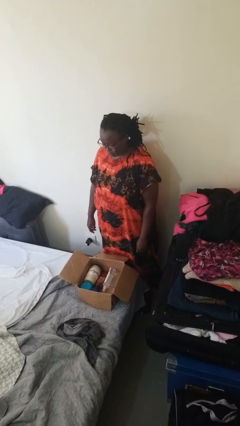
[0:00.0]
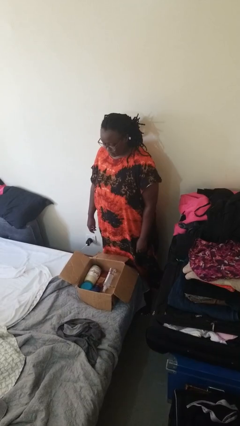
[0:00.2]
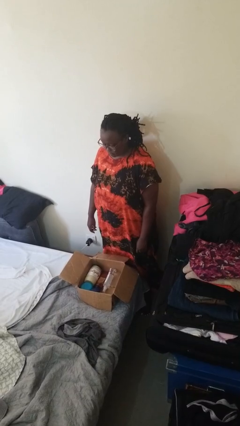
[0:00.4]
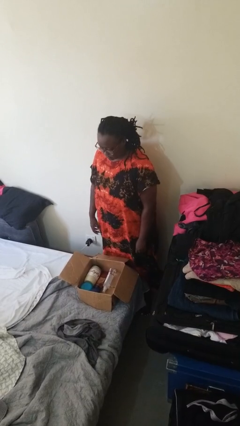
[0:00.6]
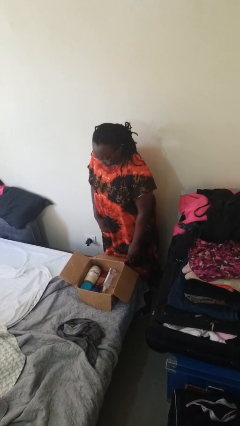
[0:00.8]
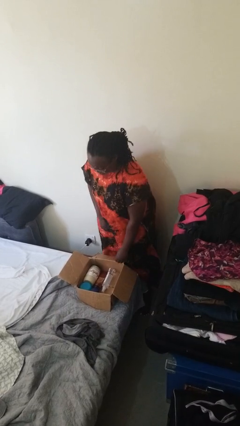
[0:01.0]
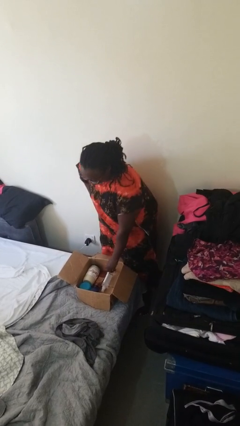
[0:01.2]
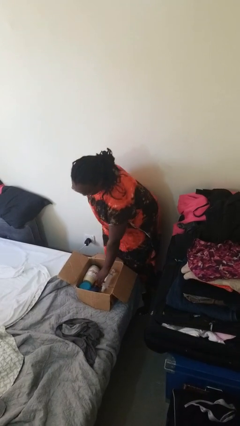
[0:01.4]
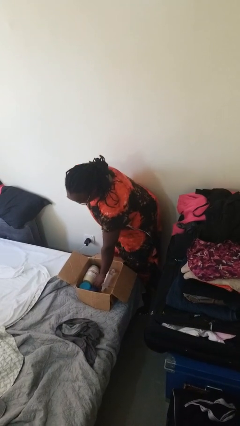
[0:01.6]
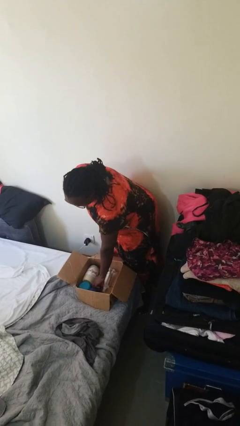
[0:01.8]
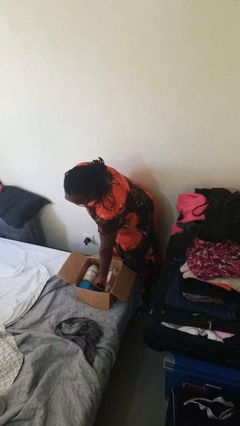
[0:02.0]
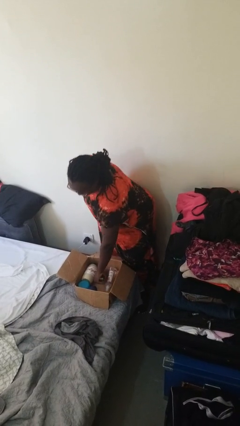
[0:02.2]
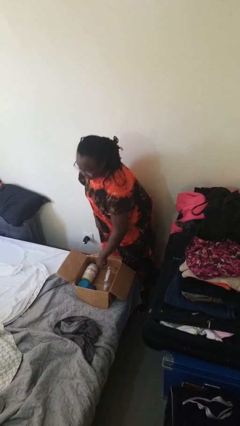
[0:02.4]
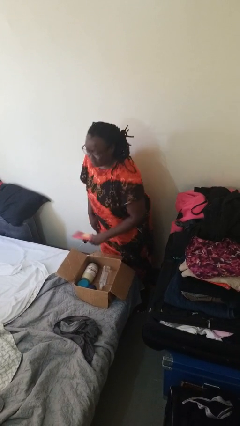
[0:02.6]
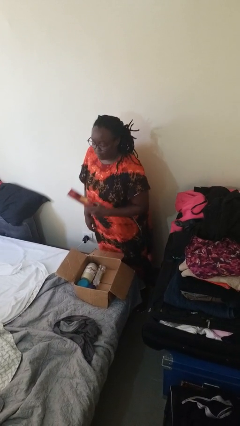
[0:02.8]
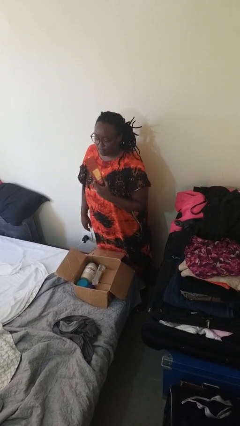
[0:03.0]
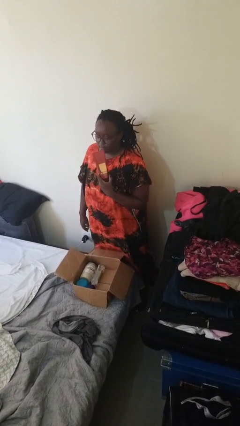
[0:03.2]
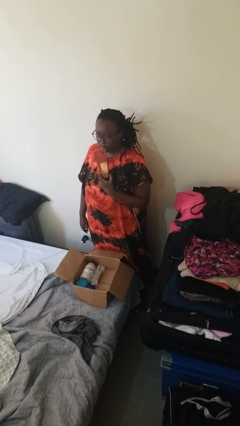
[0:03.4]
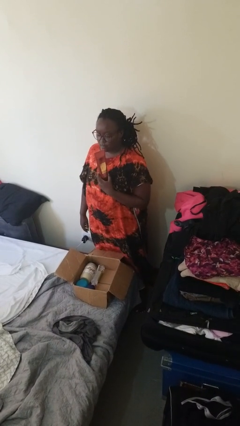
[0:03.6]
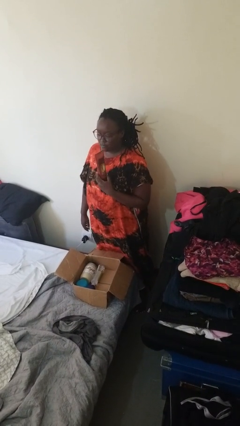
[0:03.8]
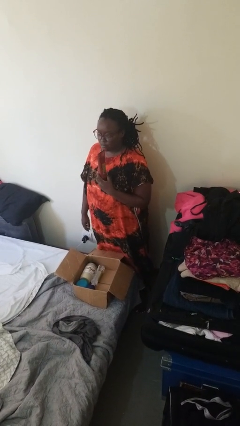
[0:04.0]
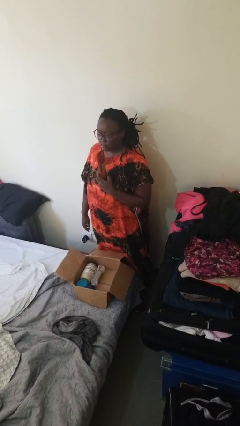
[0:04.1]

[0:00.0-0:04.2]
person takes object from box

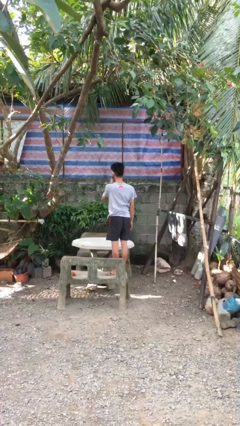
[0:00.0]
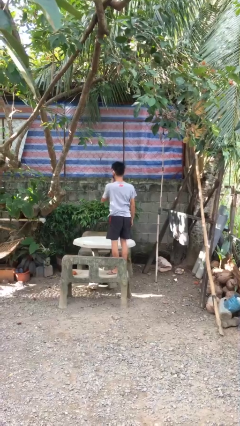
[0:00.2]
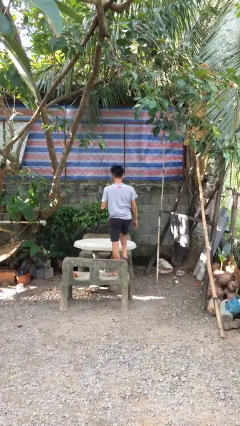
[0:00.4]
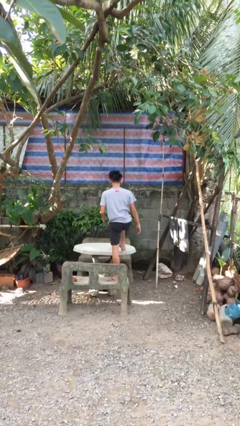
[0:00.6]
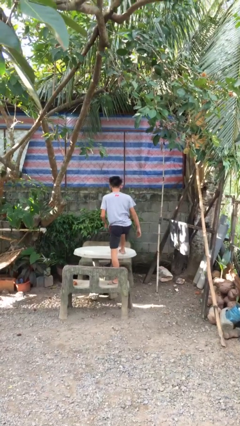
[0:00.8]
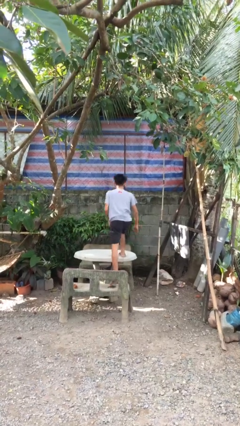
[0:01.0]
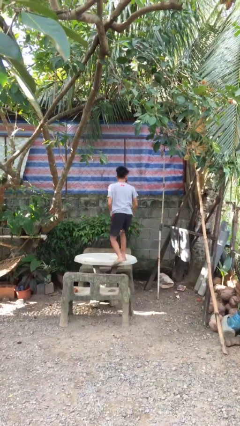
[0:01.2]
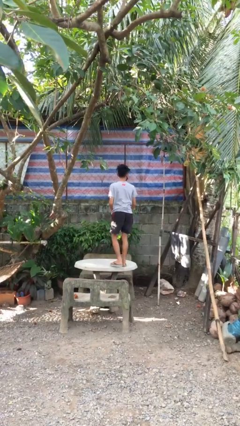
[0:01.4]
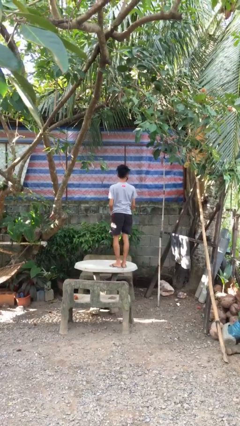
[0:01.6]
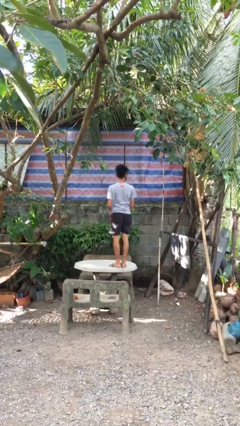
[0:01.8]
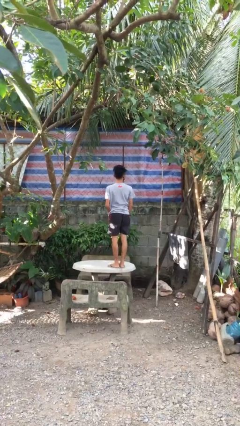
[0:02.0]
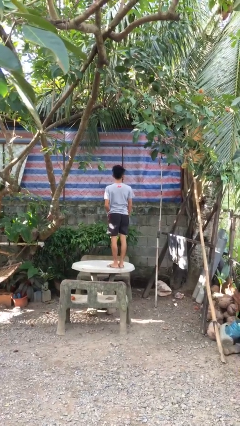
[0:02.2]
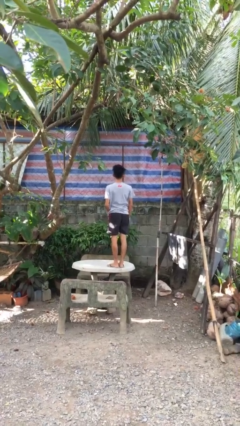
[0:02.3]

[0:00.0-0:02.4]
person climbs on table

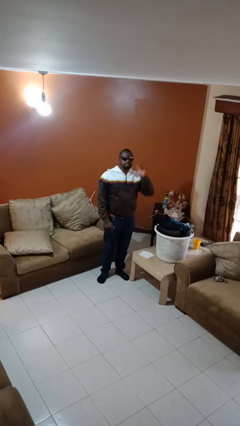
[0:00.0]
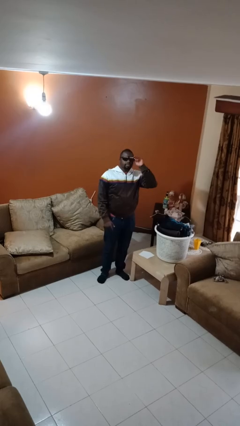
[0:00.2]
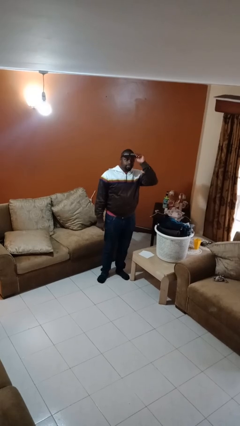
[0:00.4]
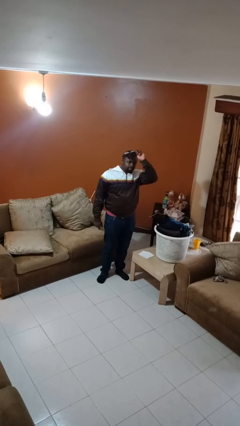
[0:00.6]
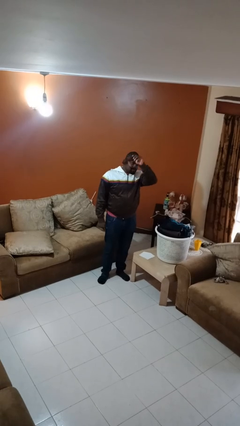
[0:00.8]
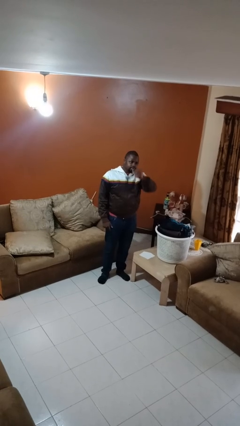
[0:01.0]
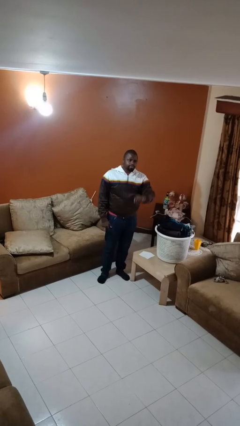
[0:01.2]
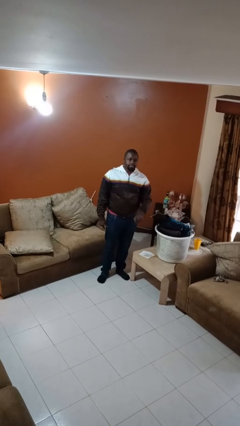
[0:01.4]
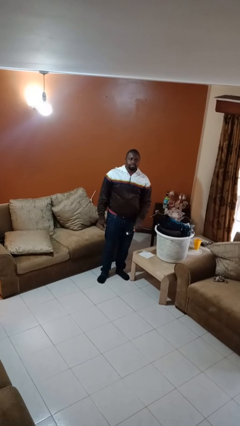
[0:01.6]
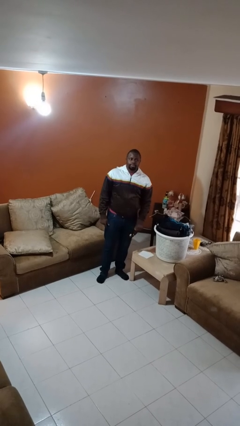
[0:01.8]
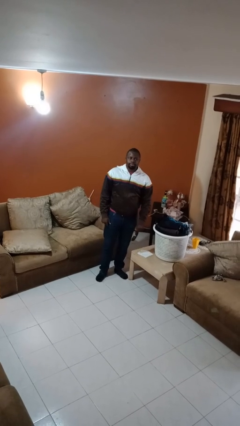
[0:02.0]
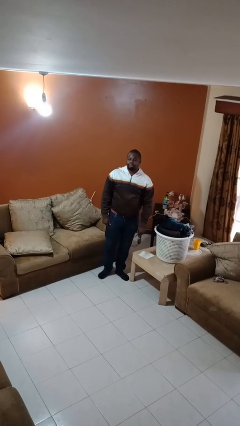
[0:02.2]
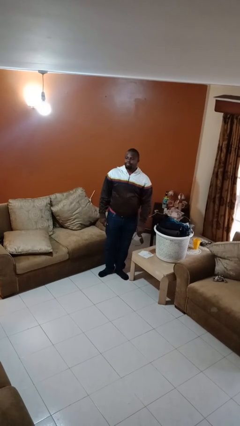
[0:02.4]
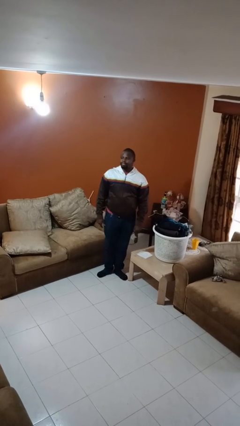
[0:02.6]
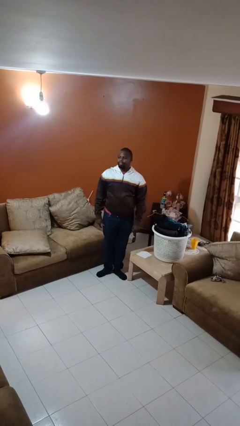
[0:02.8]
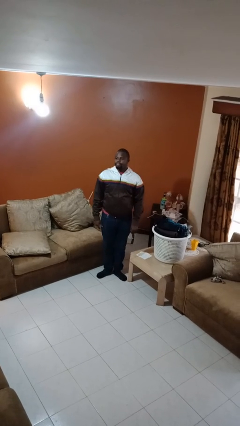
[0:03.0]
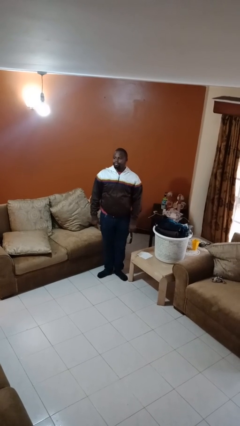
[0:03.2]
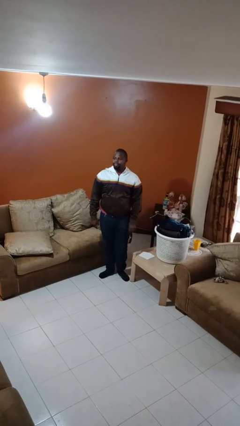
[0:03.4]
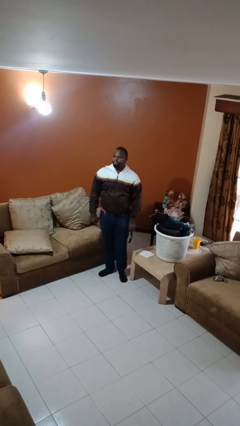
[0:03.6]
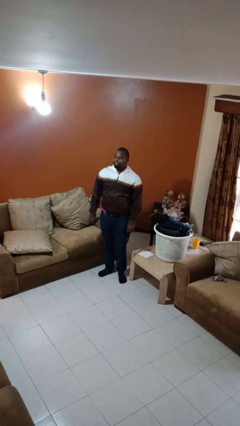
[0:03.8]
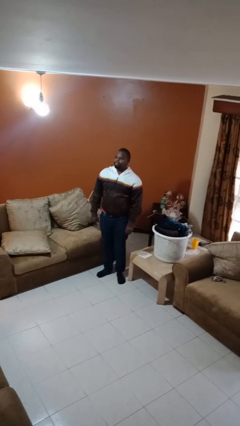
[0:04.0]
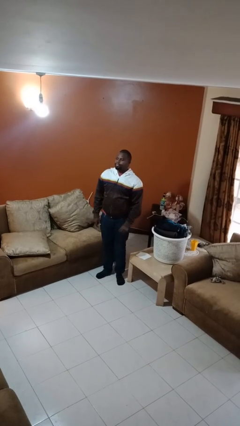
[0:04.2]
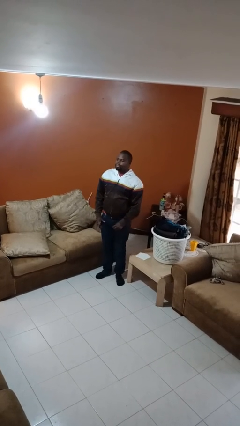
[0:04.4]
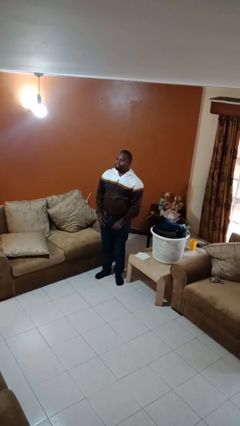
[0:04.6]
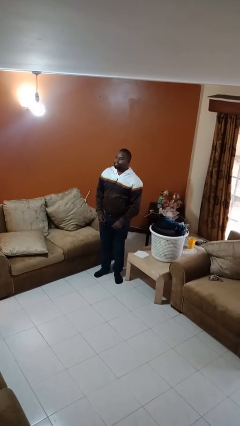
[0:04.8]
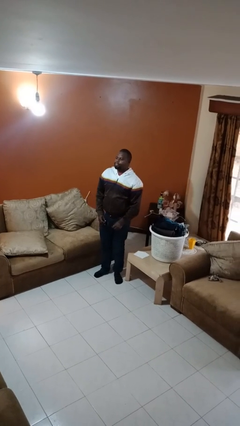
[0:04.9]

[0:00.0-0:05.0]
person takes off sunglasses

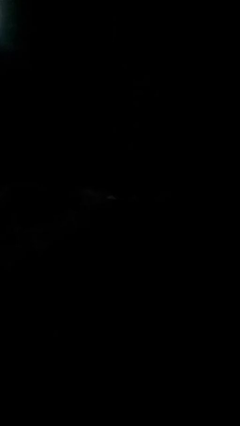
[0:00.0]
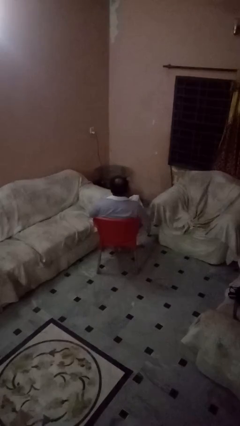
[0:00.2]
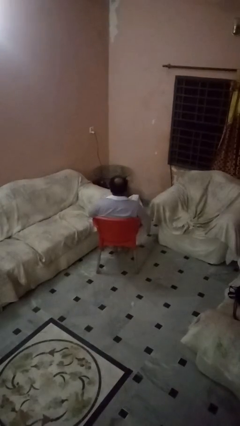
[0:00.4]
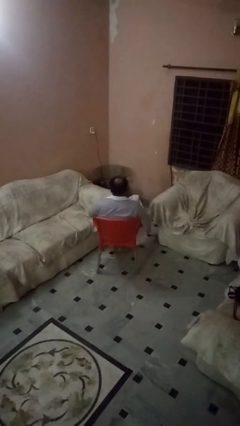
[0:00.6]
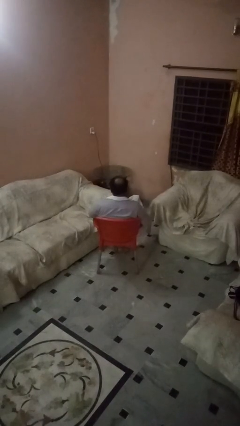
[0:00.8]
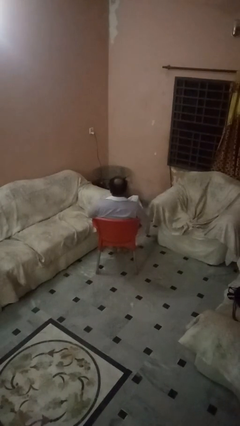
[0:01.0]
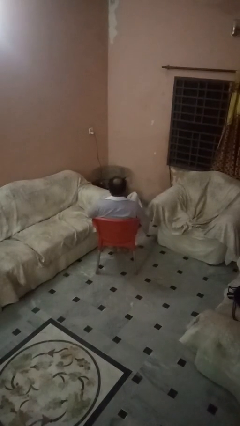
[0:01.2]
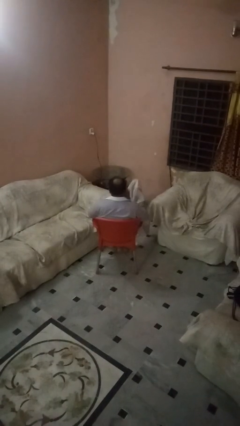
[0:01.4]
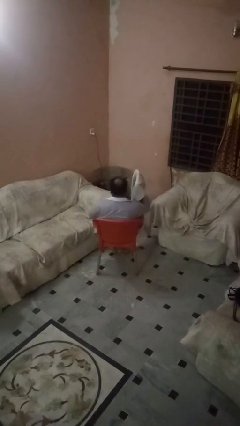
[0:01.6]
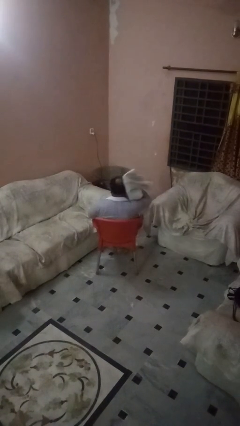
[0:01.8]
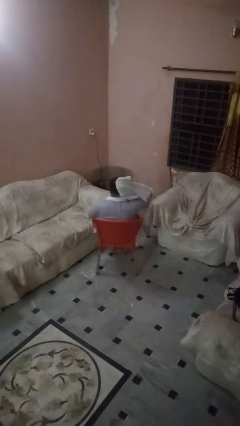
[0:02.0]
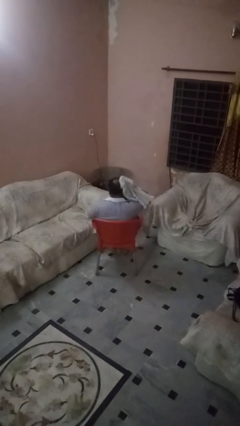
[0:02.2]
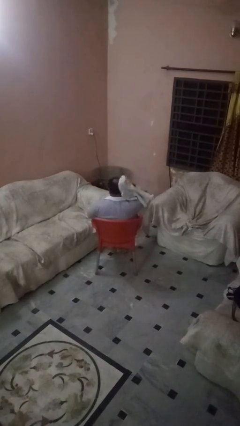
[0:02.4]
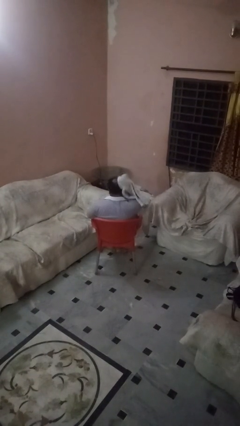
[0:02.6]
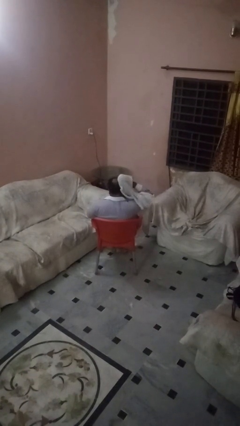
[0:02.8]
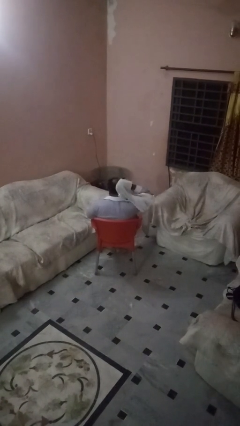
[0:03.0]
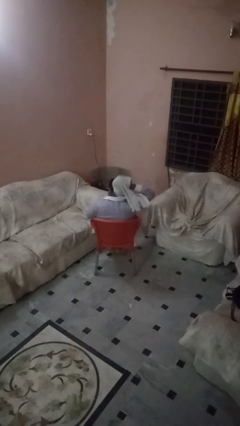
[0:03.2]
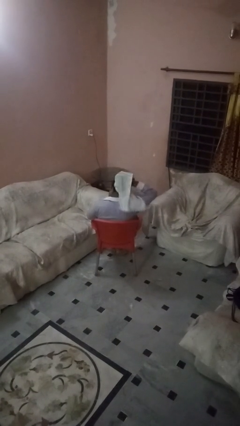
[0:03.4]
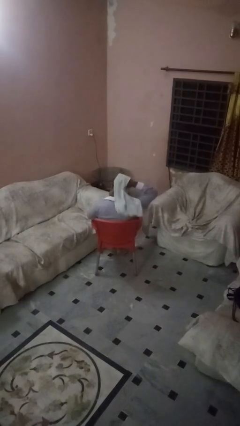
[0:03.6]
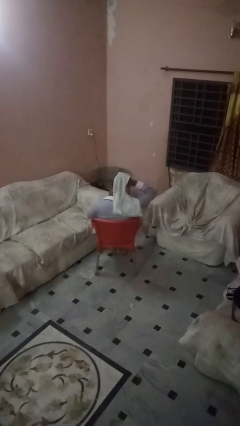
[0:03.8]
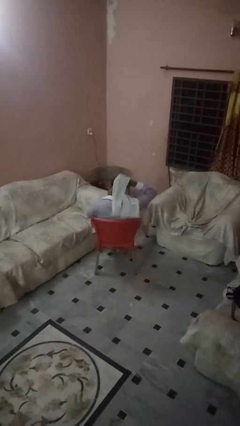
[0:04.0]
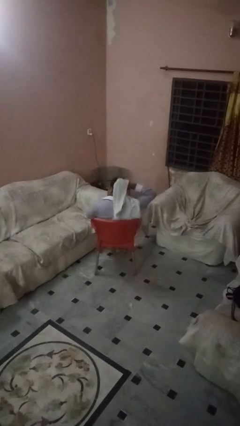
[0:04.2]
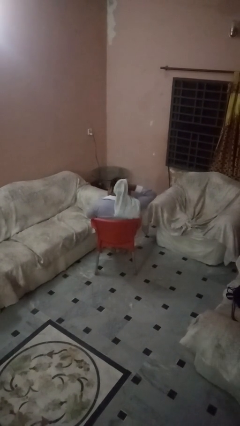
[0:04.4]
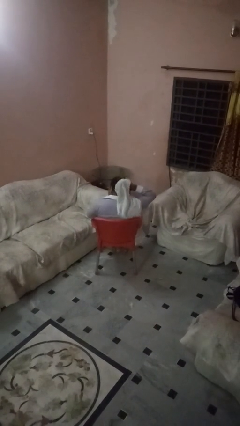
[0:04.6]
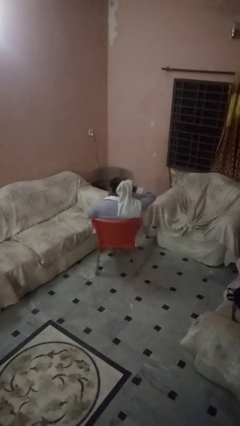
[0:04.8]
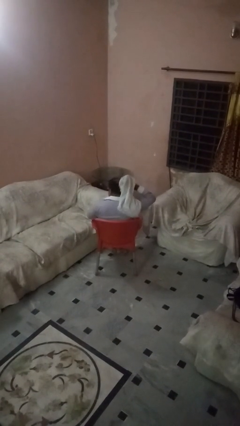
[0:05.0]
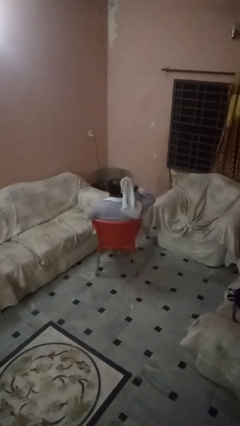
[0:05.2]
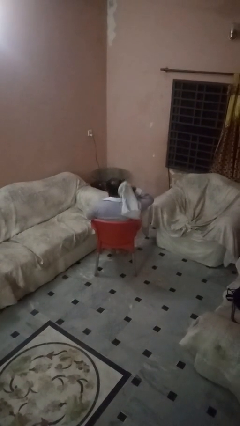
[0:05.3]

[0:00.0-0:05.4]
person dries hair with towel

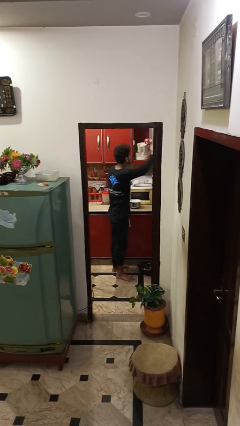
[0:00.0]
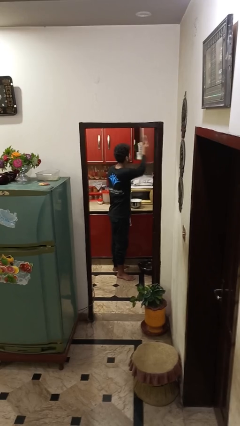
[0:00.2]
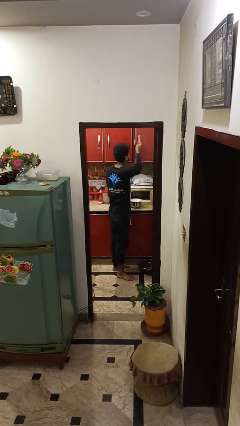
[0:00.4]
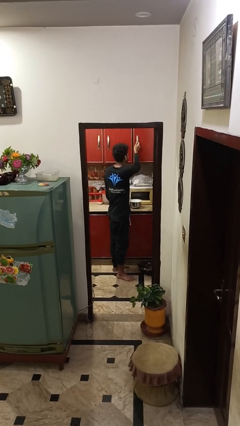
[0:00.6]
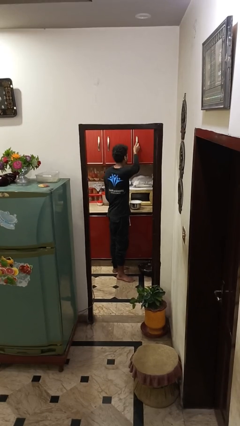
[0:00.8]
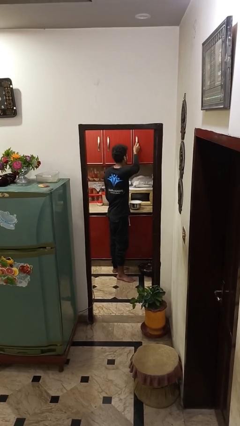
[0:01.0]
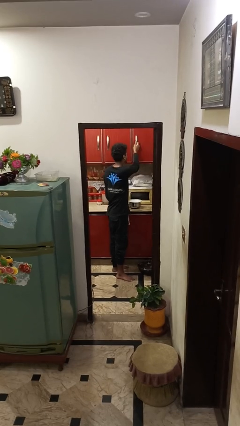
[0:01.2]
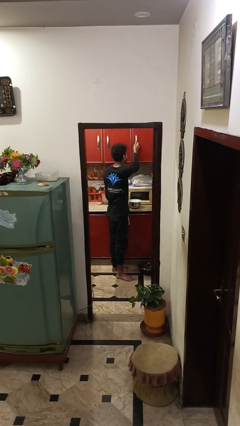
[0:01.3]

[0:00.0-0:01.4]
person closes cabinet
